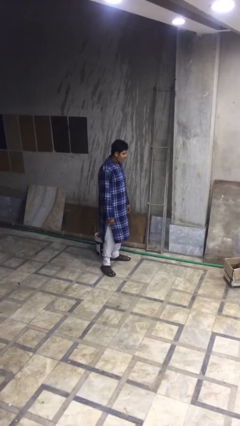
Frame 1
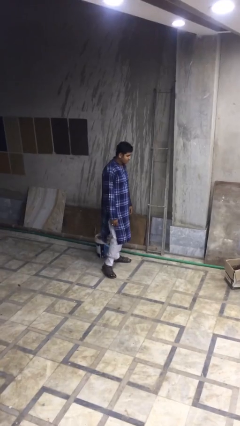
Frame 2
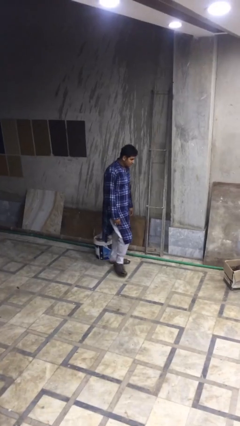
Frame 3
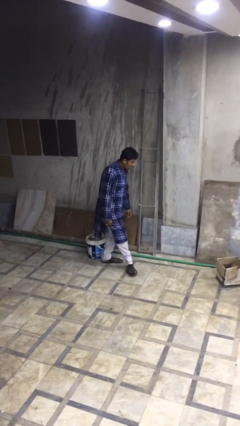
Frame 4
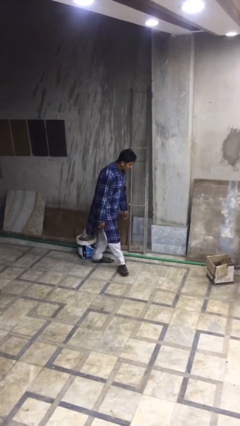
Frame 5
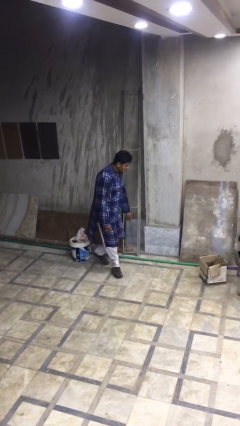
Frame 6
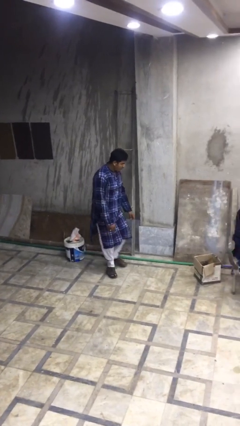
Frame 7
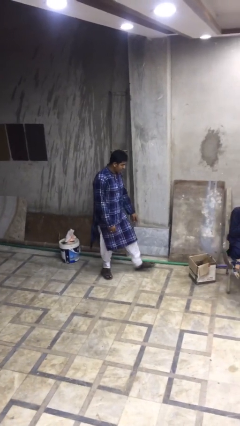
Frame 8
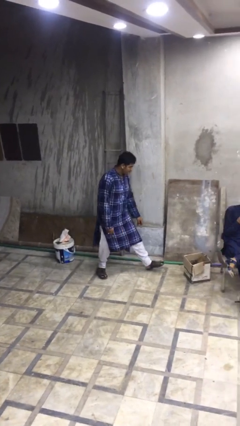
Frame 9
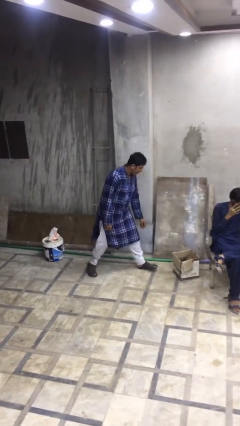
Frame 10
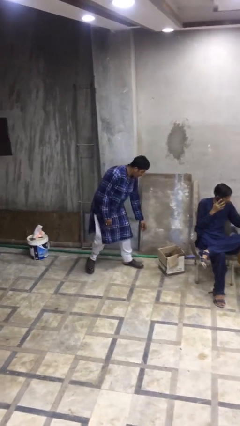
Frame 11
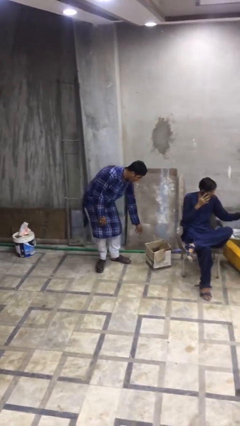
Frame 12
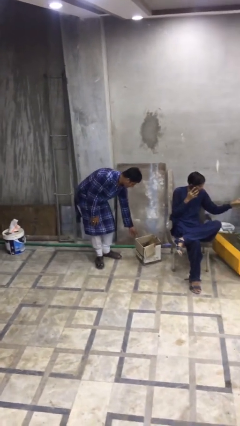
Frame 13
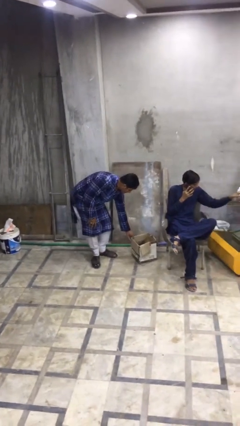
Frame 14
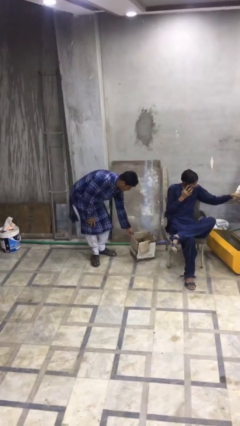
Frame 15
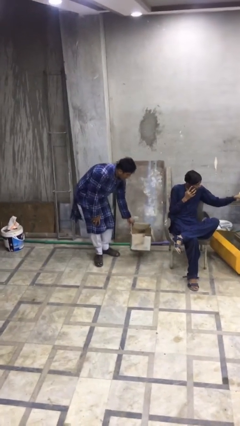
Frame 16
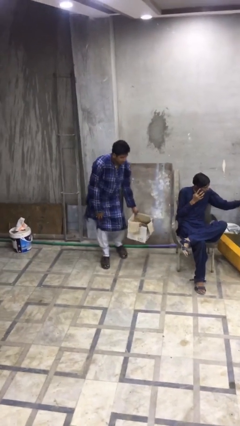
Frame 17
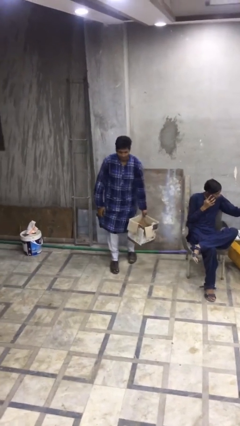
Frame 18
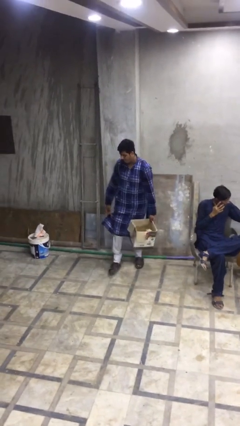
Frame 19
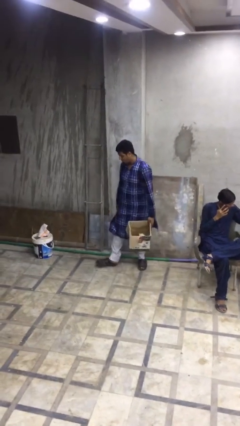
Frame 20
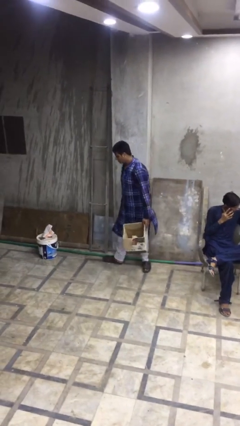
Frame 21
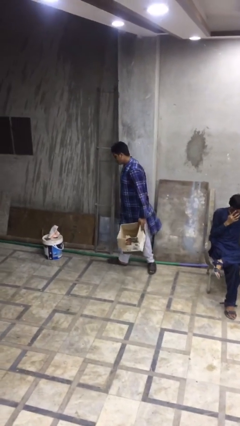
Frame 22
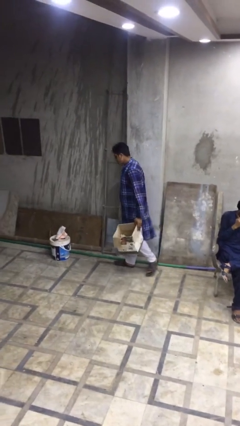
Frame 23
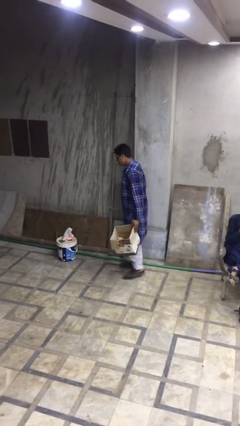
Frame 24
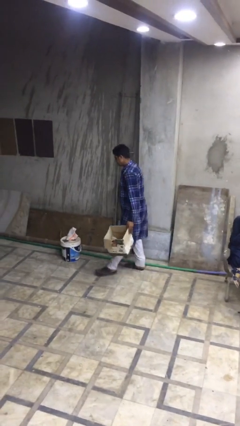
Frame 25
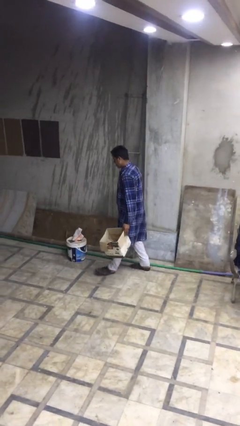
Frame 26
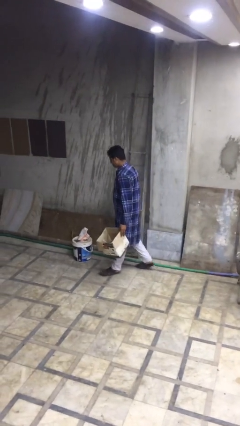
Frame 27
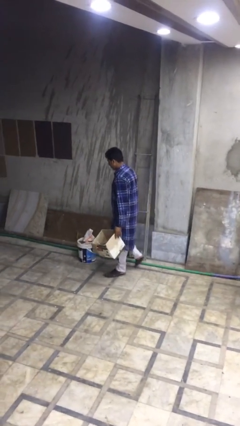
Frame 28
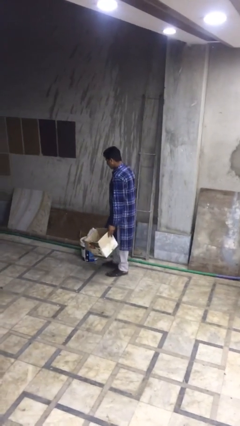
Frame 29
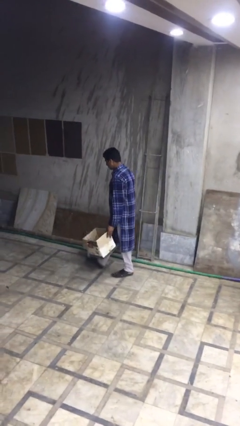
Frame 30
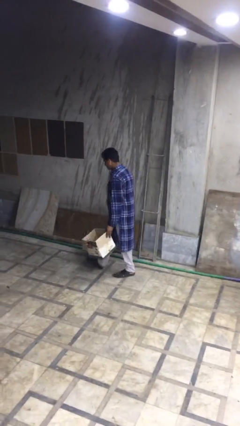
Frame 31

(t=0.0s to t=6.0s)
person steals object from person

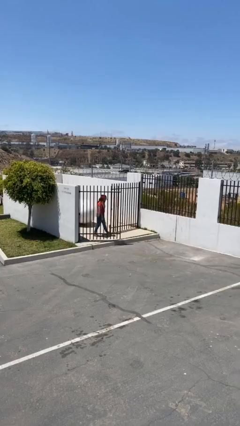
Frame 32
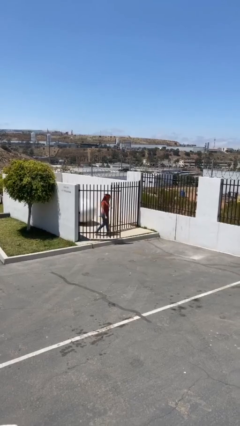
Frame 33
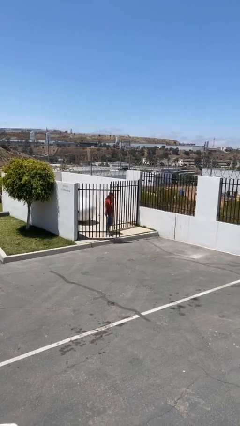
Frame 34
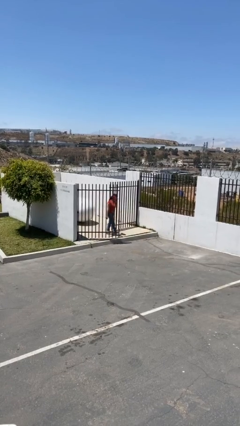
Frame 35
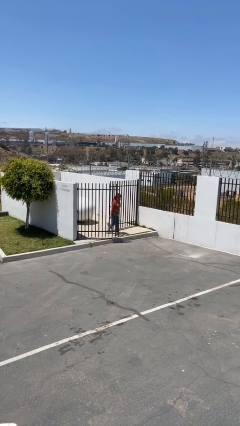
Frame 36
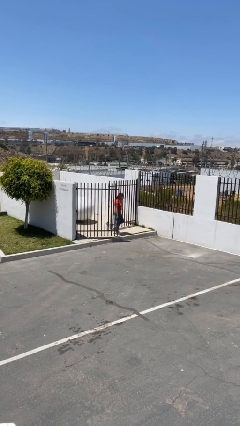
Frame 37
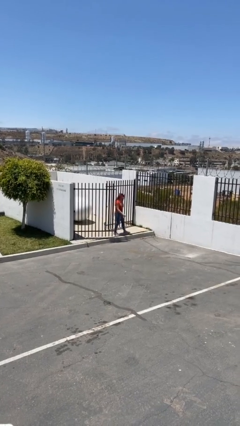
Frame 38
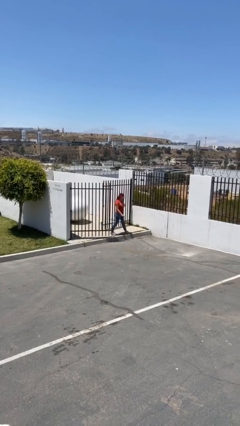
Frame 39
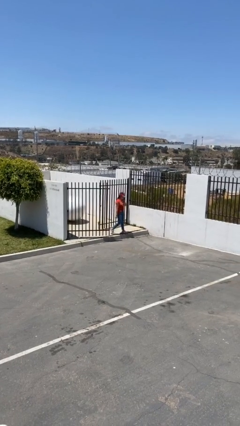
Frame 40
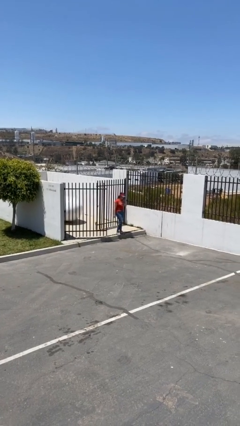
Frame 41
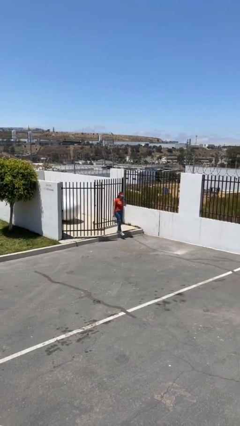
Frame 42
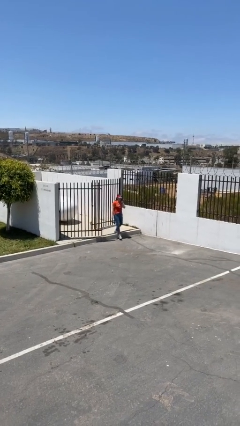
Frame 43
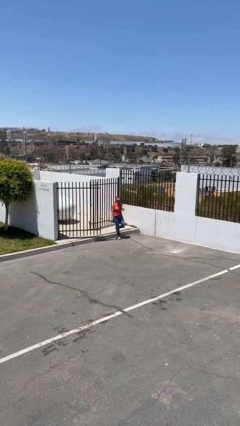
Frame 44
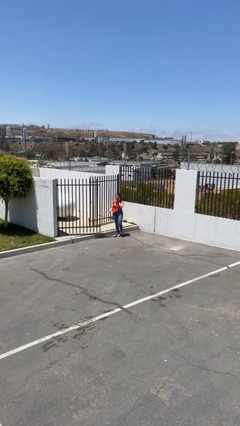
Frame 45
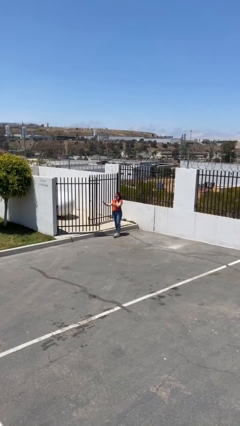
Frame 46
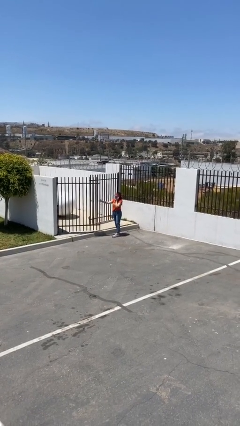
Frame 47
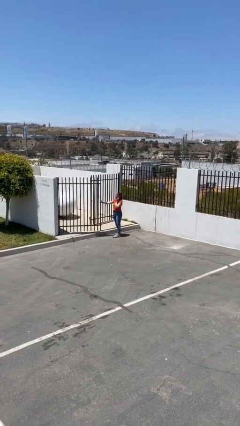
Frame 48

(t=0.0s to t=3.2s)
person enters scene through structure

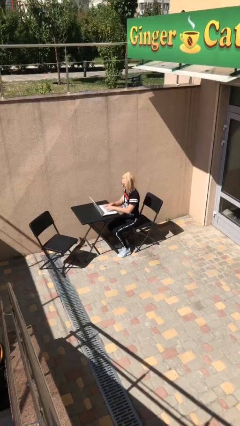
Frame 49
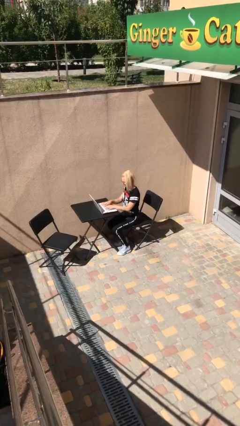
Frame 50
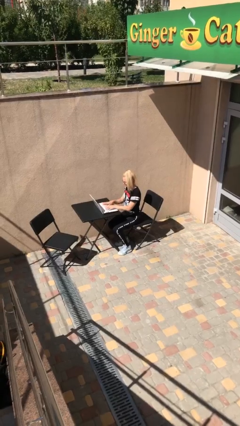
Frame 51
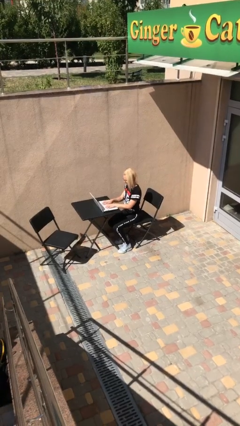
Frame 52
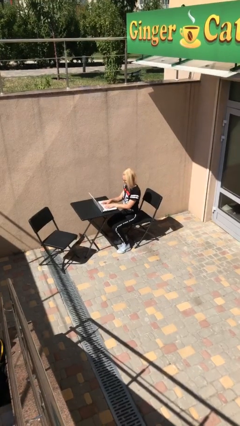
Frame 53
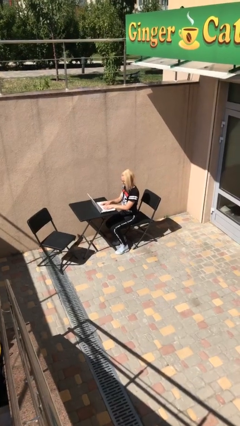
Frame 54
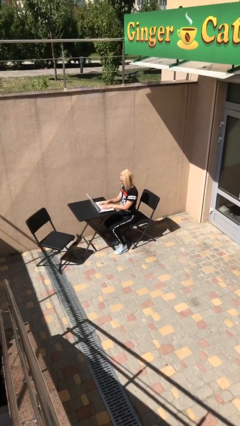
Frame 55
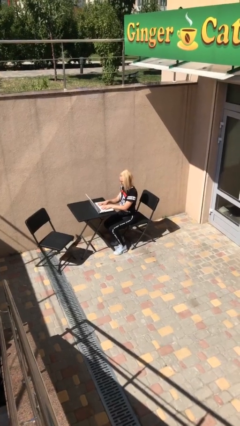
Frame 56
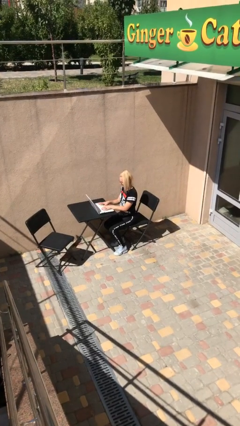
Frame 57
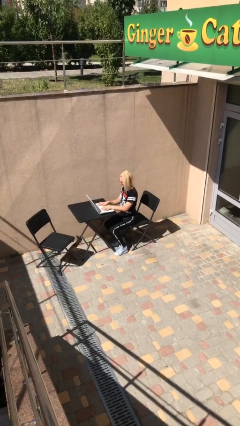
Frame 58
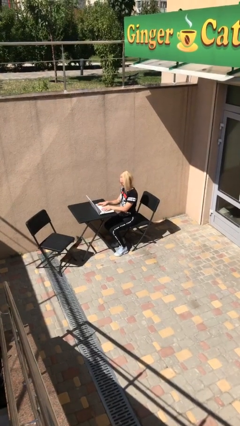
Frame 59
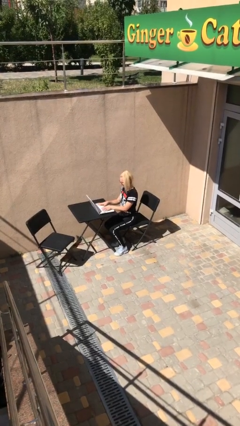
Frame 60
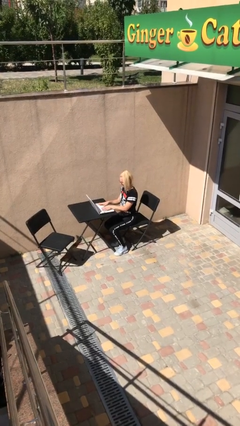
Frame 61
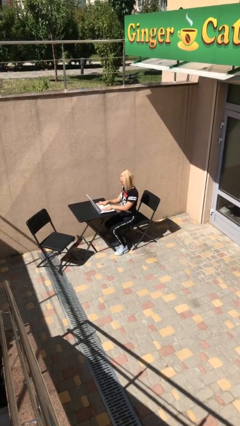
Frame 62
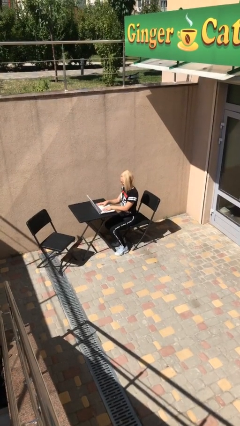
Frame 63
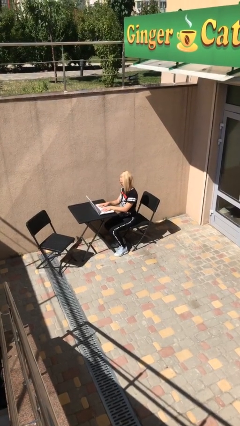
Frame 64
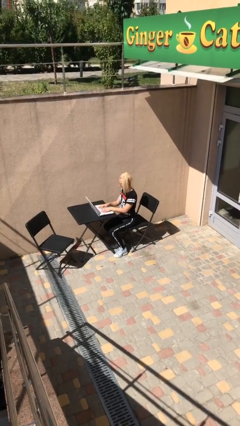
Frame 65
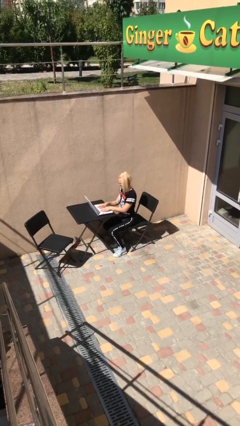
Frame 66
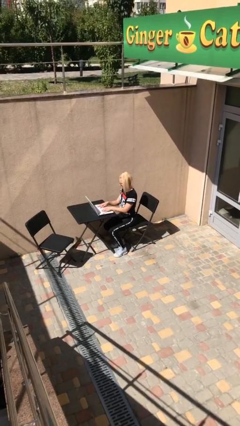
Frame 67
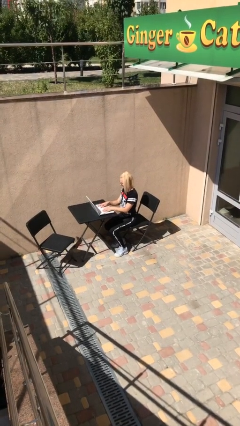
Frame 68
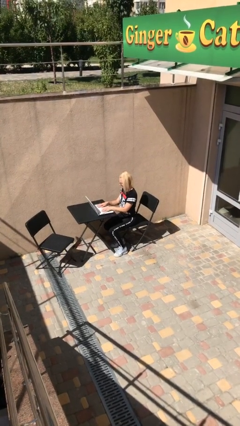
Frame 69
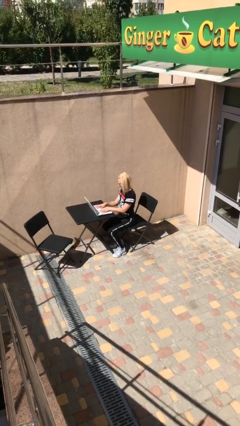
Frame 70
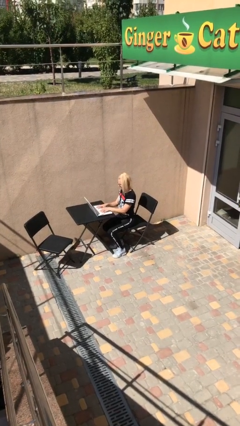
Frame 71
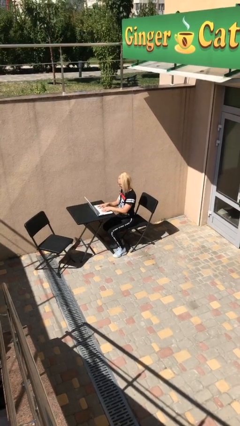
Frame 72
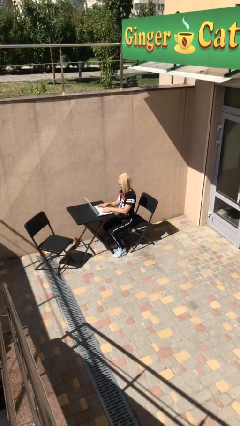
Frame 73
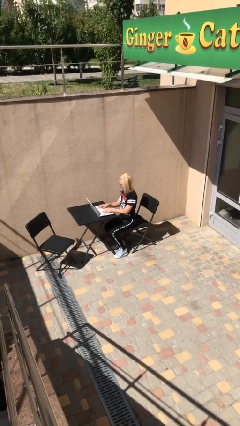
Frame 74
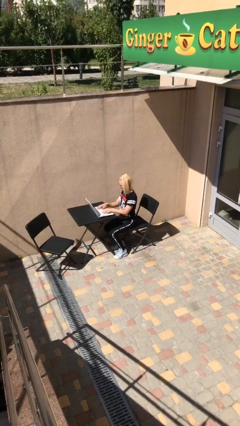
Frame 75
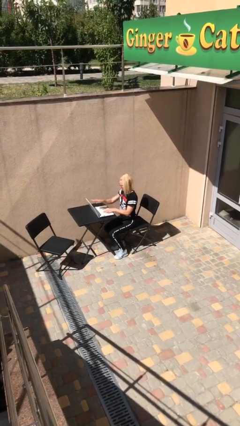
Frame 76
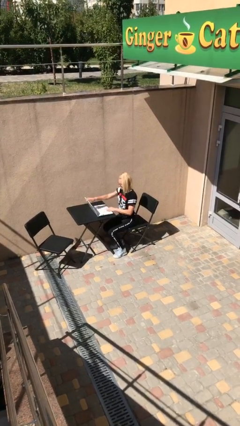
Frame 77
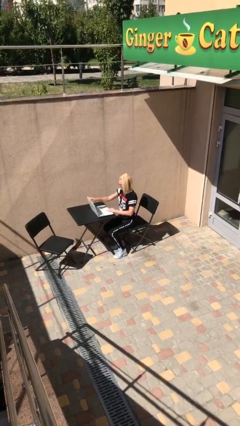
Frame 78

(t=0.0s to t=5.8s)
person interacts with laptop

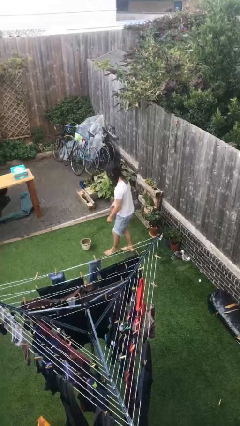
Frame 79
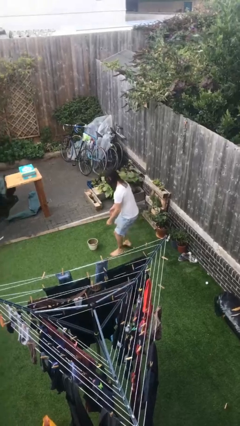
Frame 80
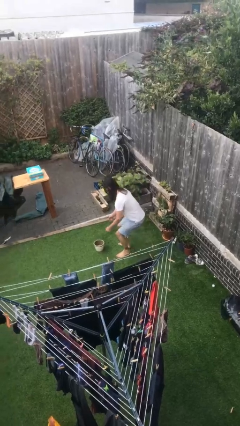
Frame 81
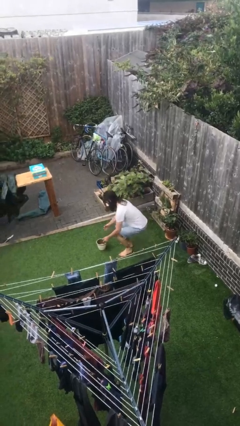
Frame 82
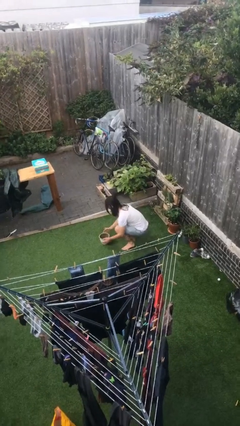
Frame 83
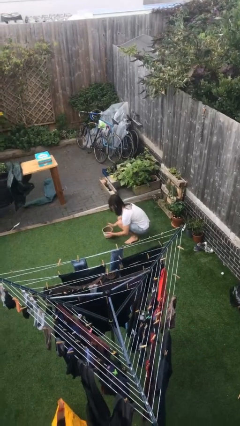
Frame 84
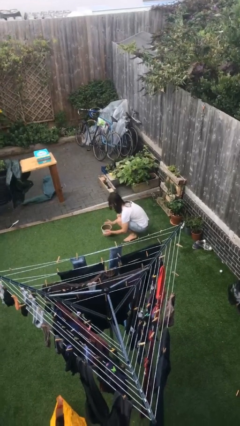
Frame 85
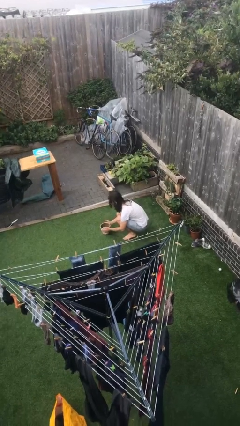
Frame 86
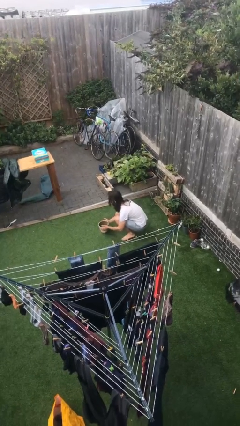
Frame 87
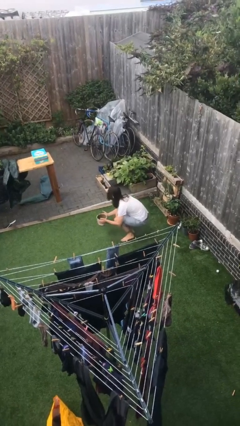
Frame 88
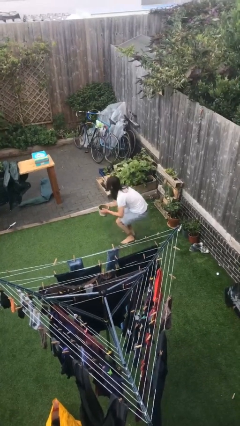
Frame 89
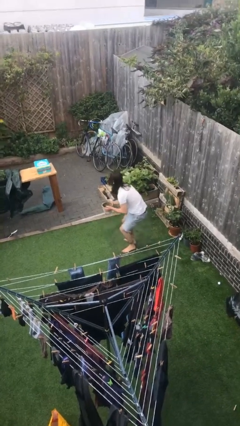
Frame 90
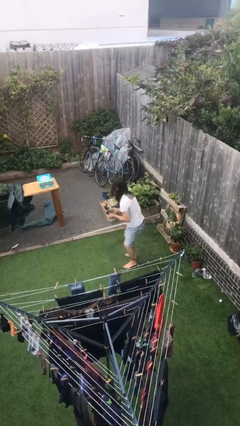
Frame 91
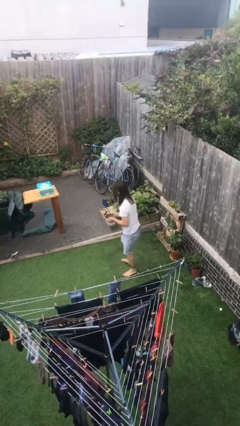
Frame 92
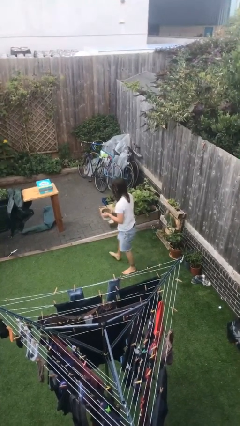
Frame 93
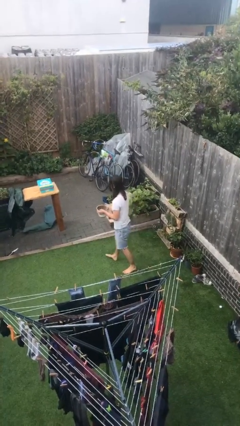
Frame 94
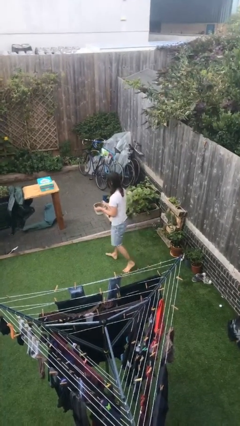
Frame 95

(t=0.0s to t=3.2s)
person picks up object from floor
